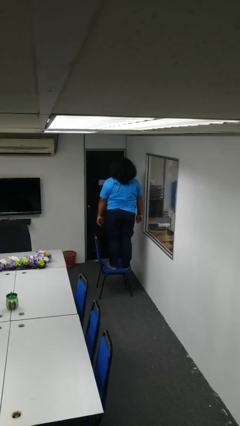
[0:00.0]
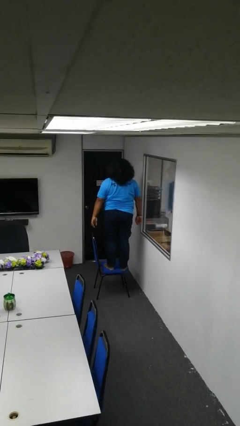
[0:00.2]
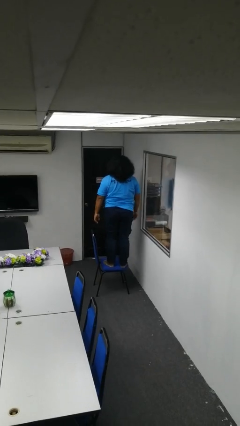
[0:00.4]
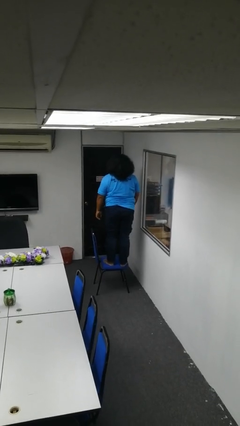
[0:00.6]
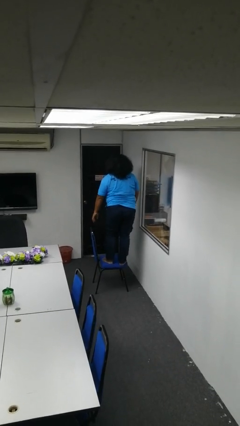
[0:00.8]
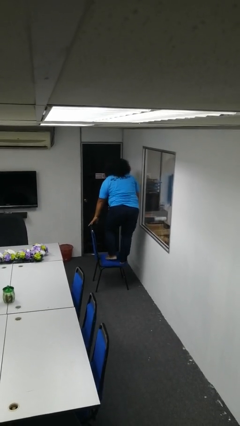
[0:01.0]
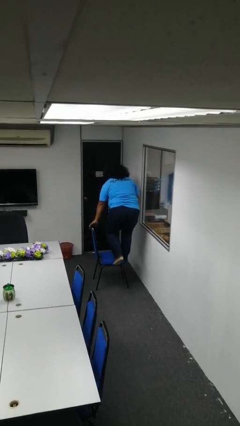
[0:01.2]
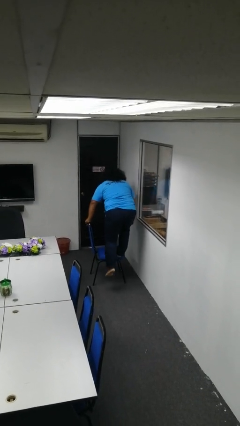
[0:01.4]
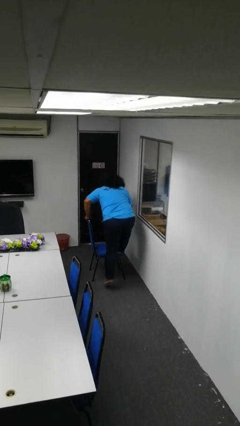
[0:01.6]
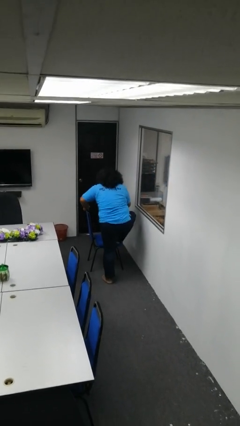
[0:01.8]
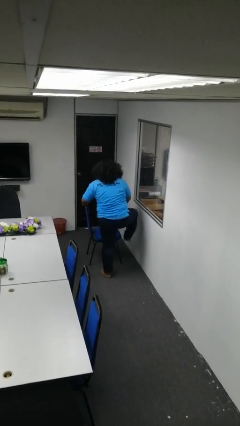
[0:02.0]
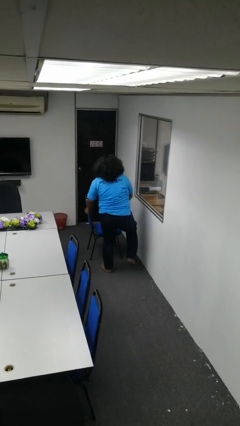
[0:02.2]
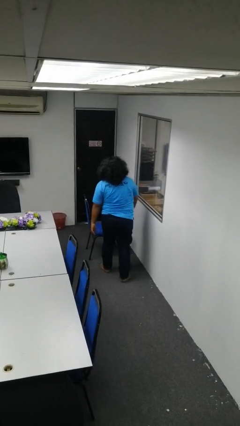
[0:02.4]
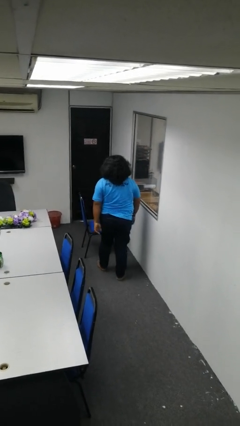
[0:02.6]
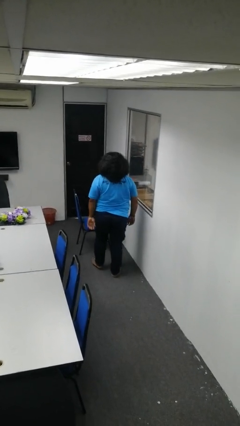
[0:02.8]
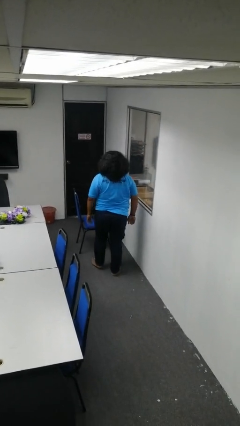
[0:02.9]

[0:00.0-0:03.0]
person climbs off chair

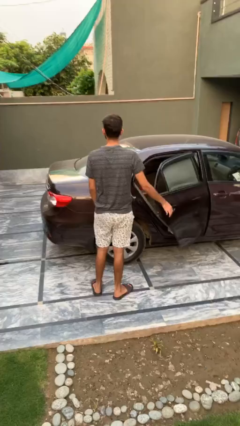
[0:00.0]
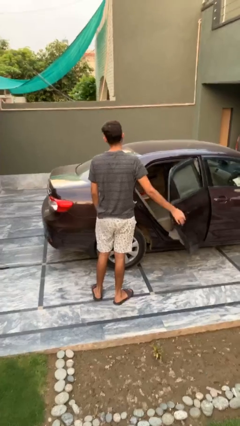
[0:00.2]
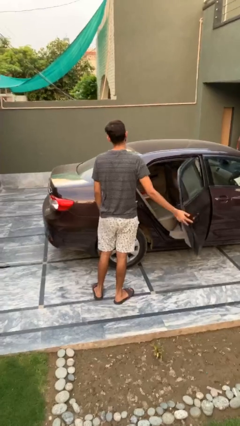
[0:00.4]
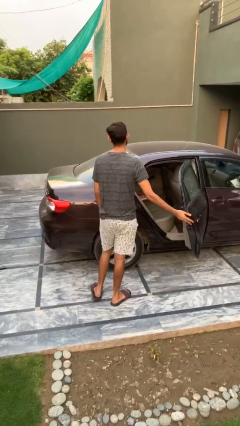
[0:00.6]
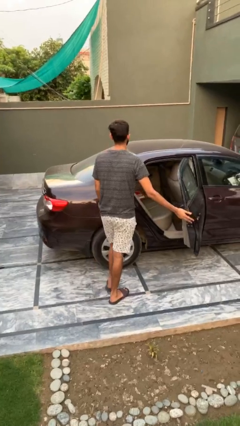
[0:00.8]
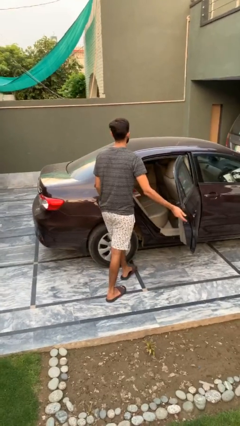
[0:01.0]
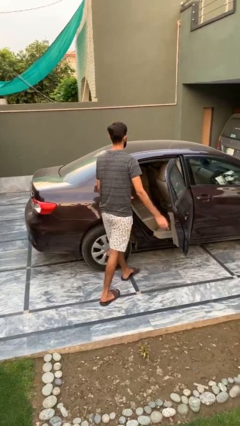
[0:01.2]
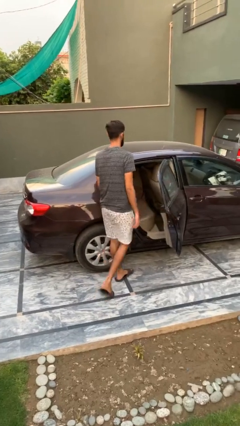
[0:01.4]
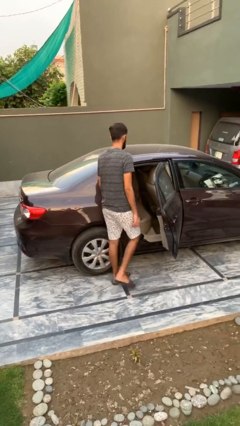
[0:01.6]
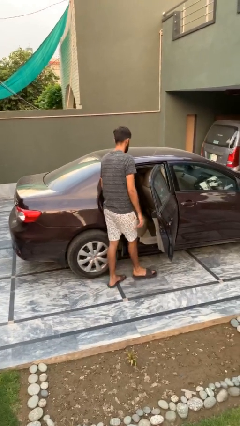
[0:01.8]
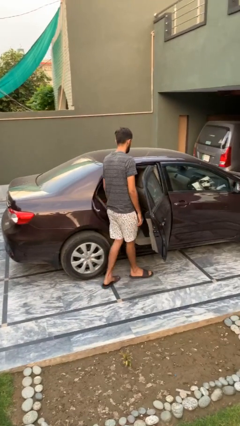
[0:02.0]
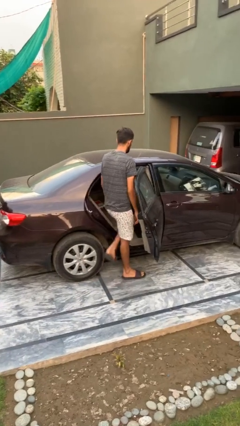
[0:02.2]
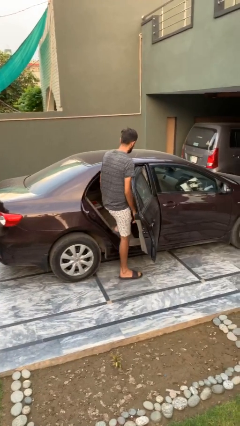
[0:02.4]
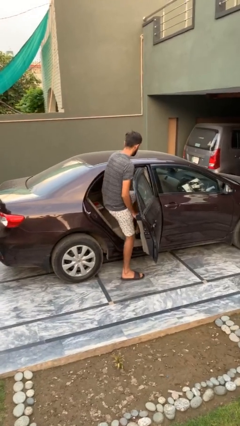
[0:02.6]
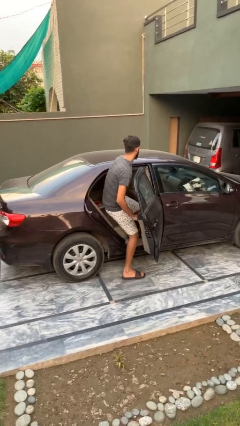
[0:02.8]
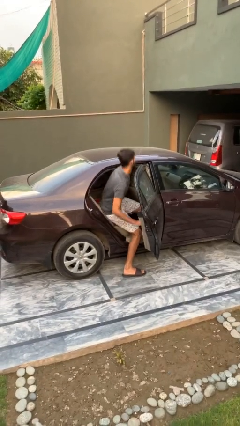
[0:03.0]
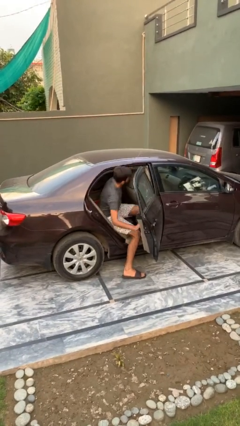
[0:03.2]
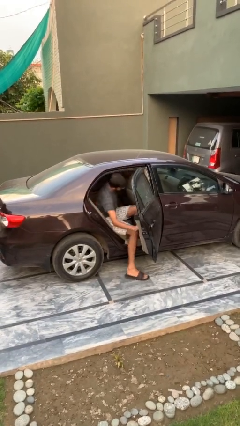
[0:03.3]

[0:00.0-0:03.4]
person enters car

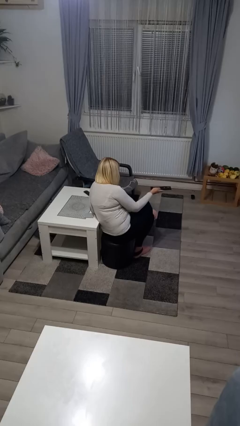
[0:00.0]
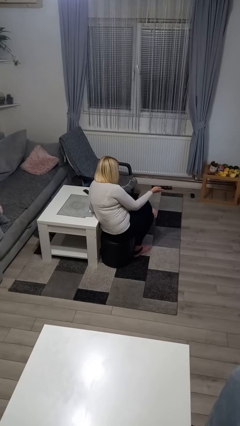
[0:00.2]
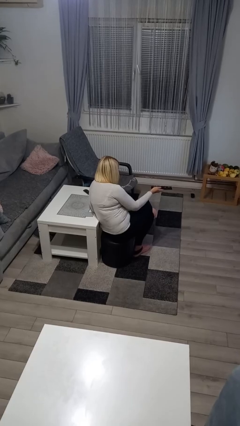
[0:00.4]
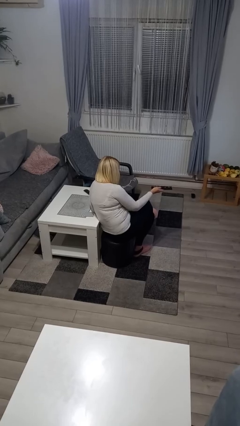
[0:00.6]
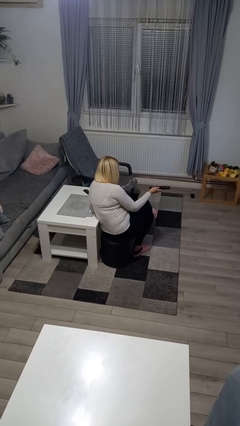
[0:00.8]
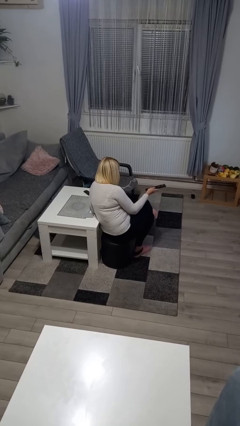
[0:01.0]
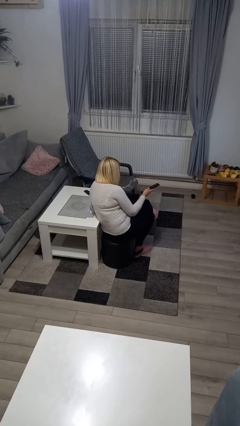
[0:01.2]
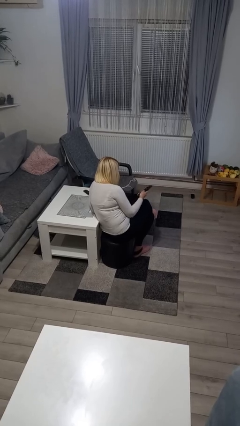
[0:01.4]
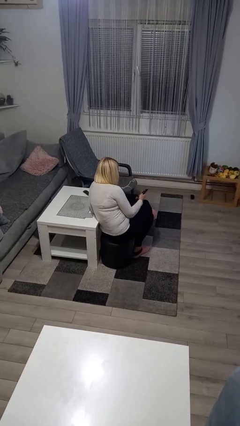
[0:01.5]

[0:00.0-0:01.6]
person uses television remote

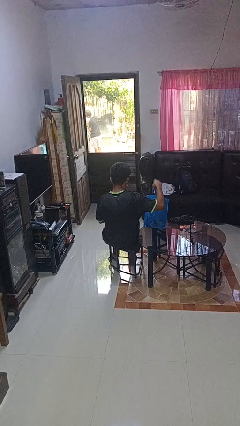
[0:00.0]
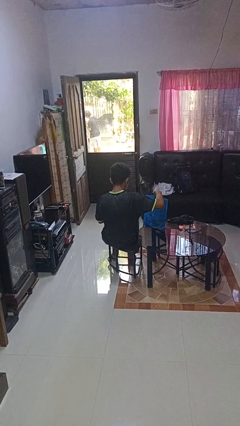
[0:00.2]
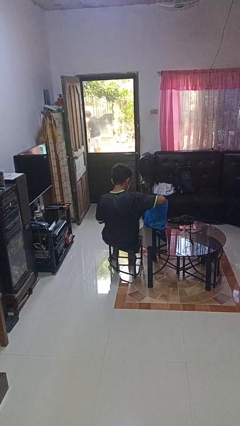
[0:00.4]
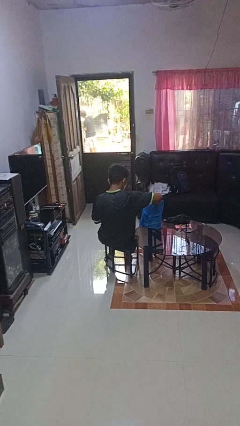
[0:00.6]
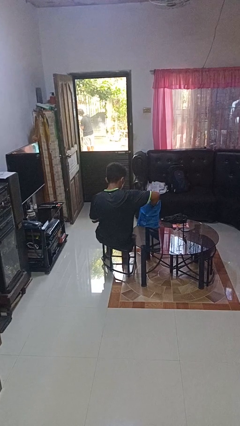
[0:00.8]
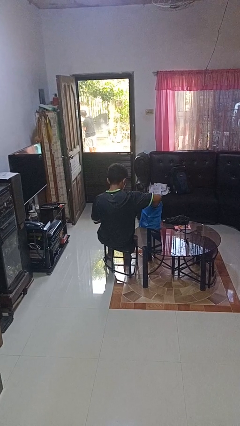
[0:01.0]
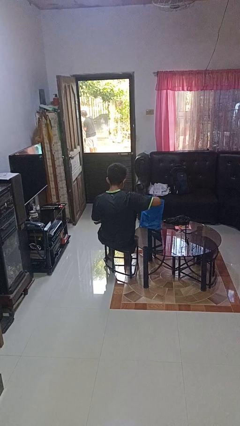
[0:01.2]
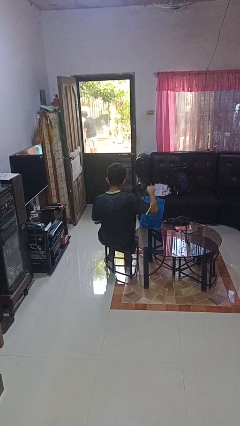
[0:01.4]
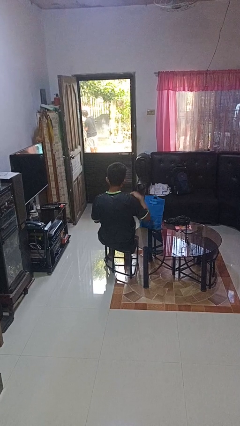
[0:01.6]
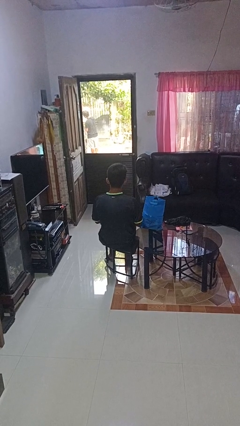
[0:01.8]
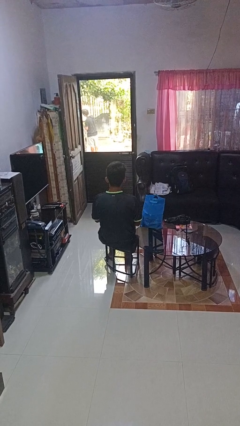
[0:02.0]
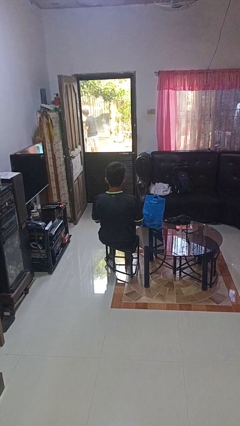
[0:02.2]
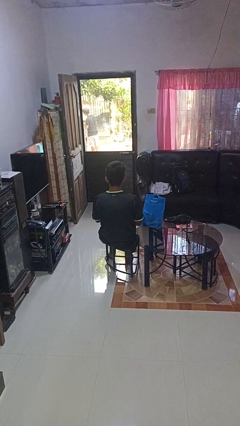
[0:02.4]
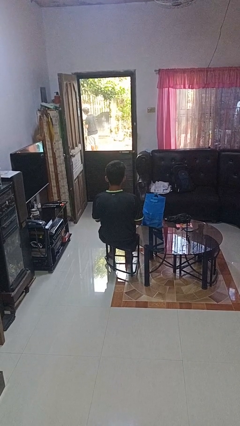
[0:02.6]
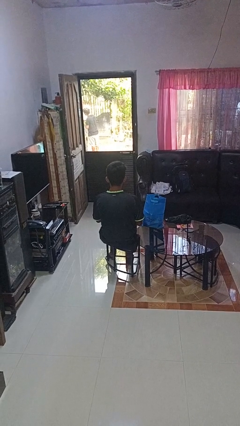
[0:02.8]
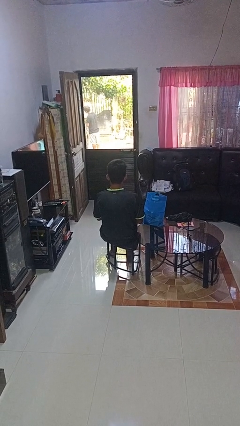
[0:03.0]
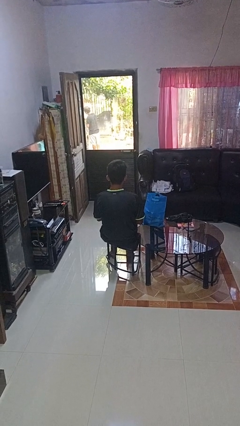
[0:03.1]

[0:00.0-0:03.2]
person puts object into bag

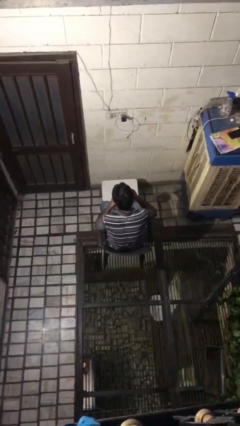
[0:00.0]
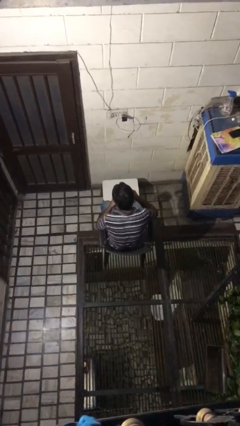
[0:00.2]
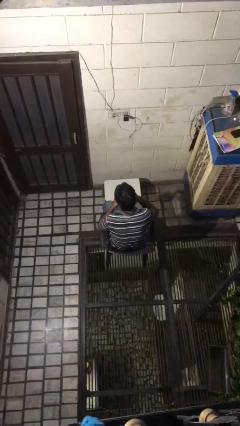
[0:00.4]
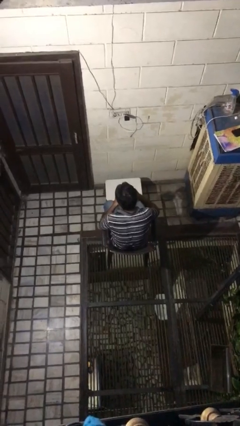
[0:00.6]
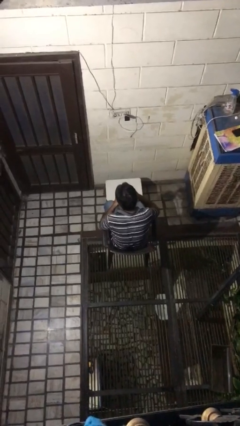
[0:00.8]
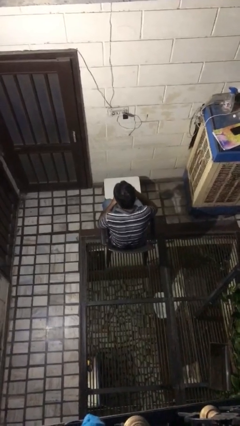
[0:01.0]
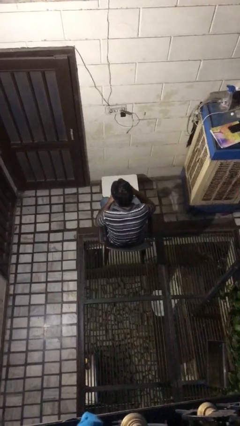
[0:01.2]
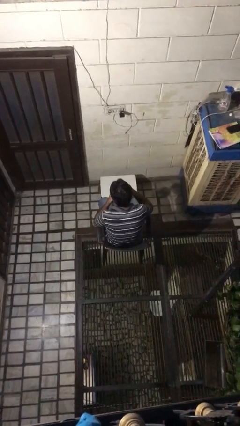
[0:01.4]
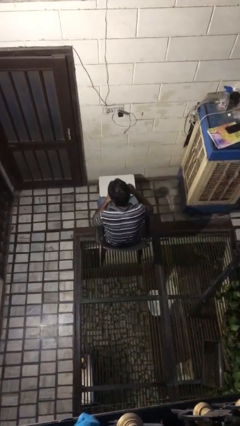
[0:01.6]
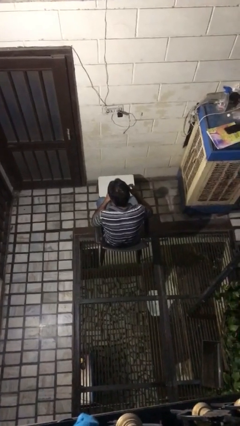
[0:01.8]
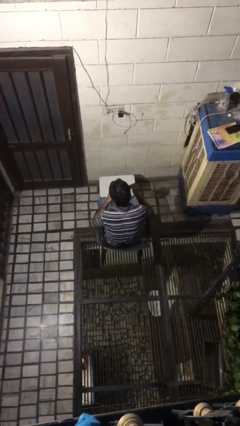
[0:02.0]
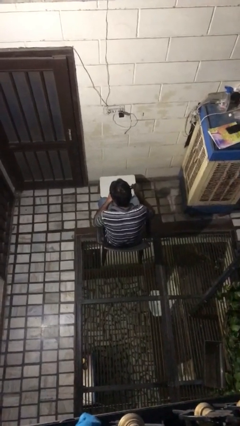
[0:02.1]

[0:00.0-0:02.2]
person stirs mug

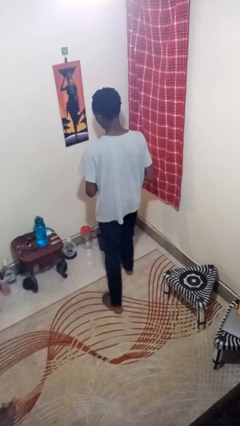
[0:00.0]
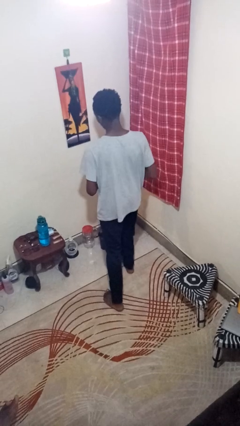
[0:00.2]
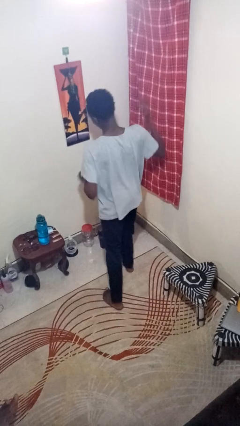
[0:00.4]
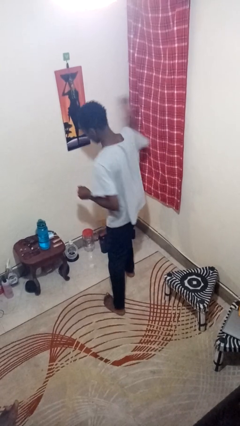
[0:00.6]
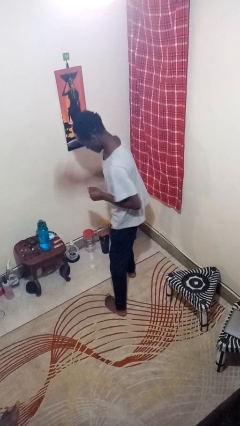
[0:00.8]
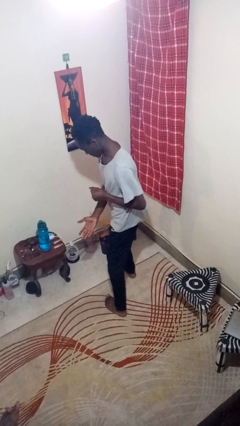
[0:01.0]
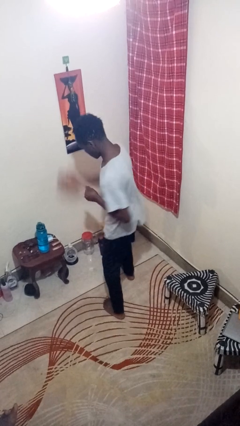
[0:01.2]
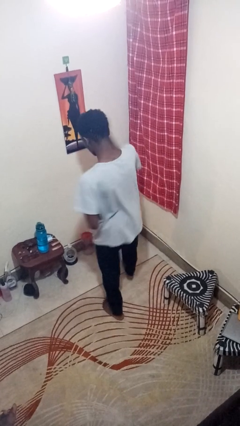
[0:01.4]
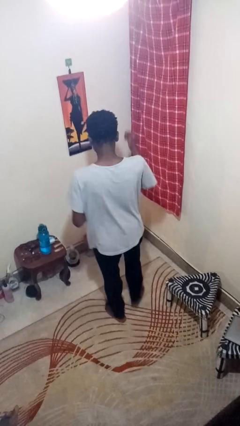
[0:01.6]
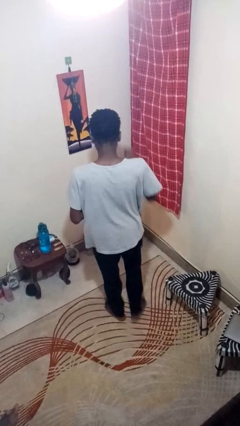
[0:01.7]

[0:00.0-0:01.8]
person karate chop

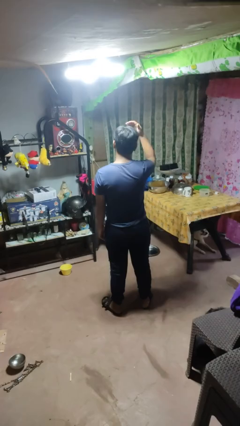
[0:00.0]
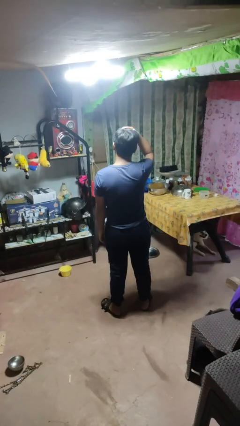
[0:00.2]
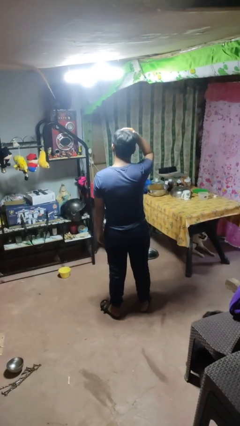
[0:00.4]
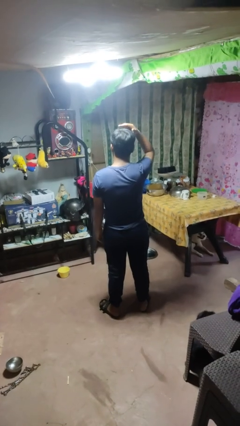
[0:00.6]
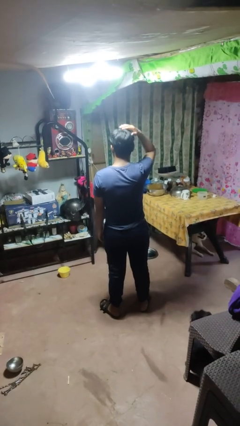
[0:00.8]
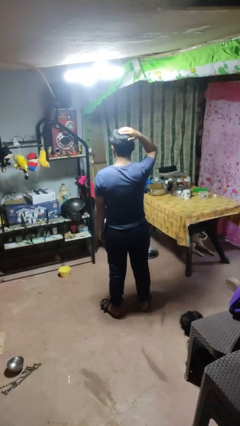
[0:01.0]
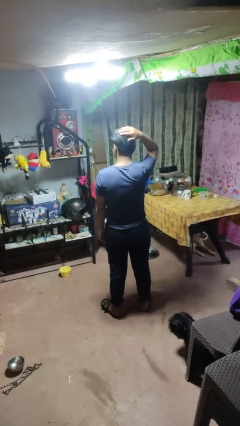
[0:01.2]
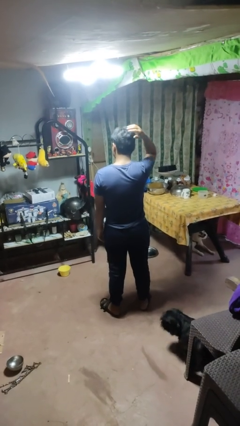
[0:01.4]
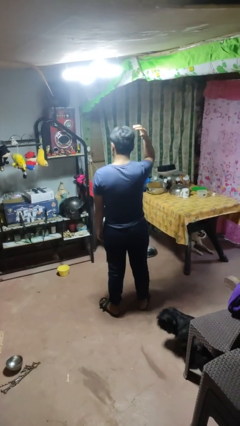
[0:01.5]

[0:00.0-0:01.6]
person pats head

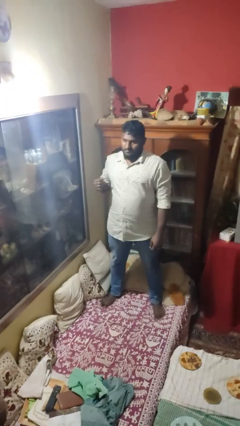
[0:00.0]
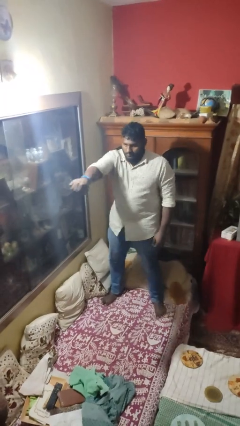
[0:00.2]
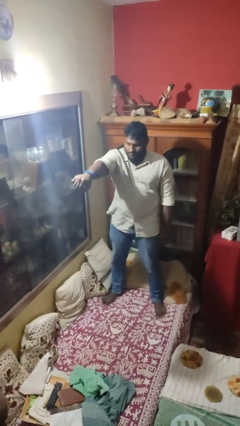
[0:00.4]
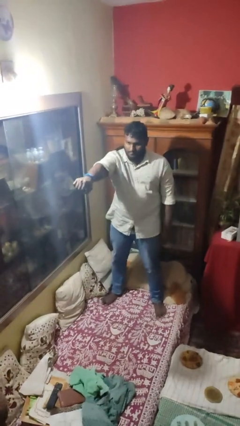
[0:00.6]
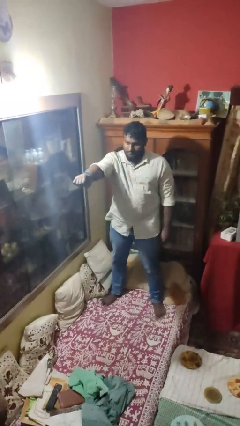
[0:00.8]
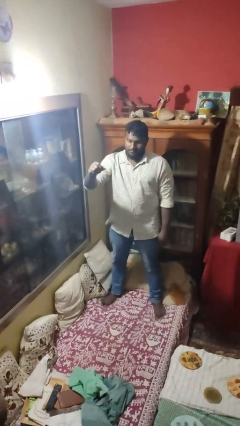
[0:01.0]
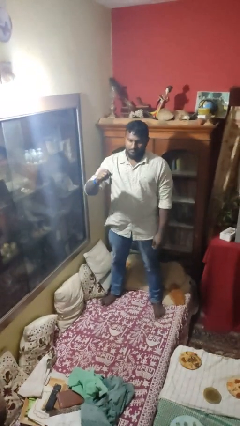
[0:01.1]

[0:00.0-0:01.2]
person punches
